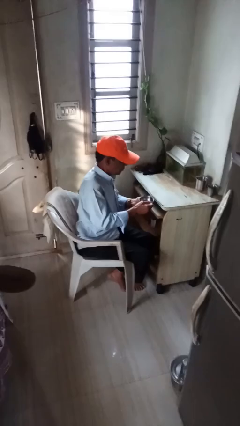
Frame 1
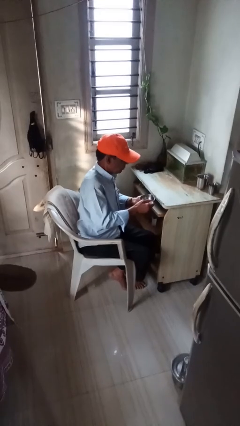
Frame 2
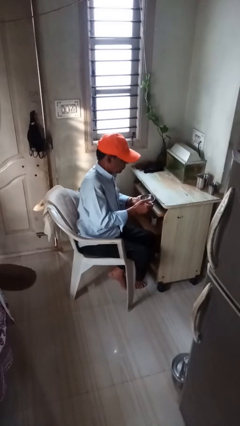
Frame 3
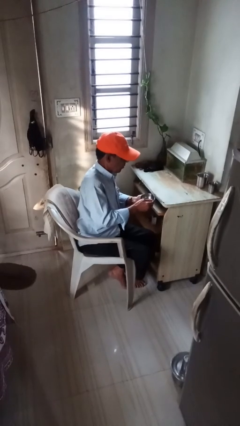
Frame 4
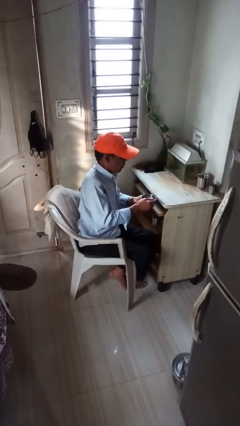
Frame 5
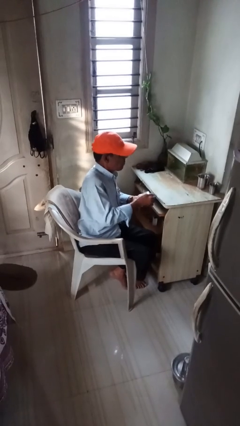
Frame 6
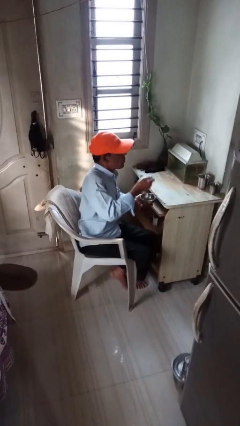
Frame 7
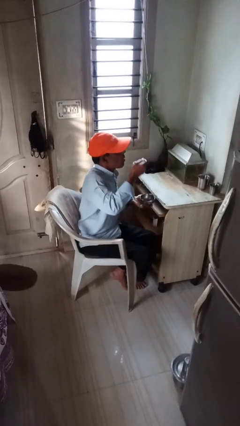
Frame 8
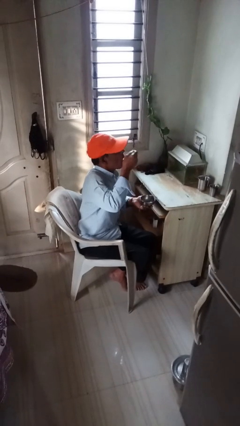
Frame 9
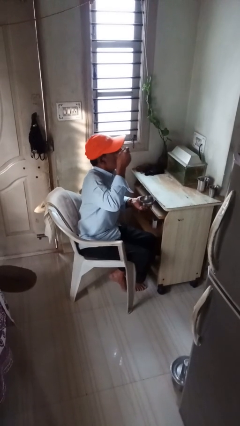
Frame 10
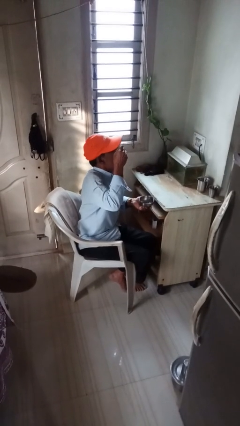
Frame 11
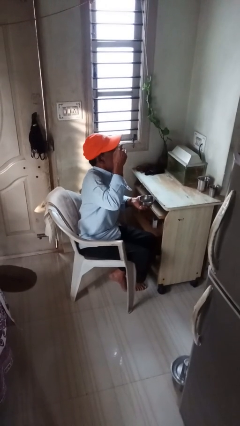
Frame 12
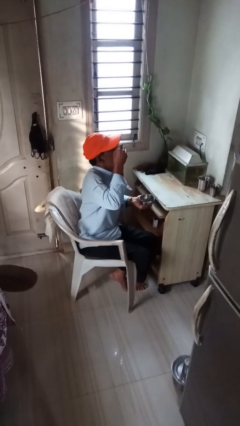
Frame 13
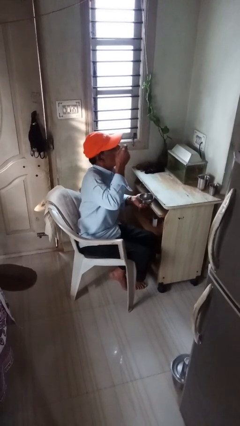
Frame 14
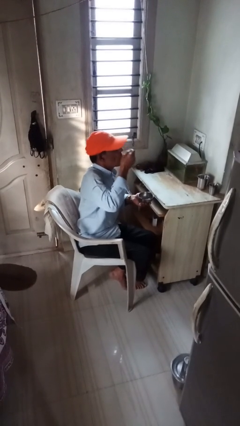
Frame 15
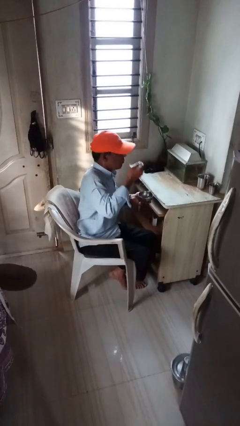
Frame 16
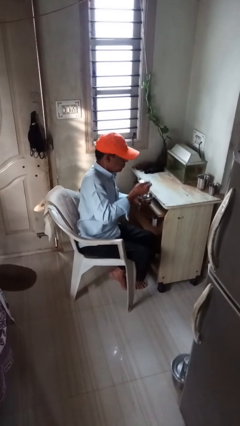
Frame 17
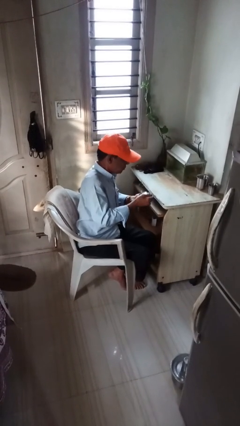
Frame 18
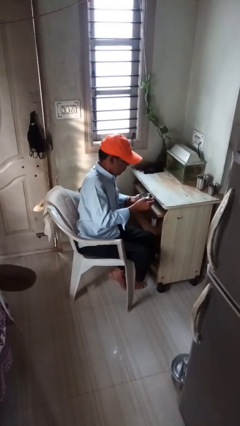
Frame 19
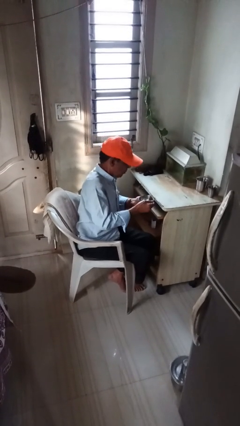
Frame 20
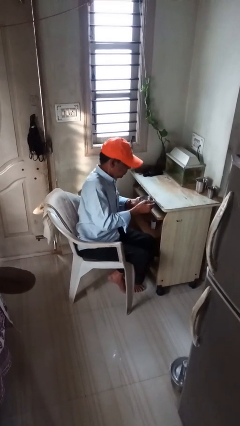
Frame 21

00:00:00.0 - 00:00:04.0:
person eats with utensil

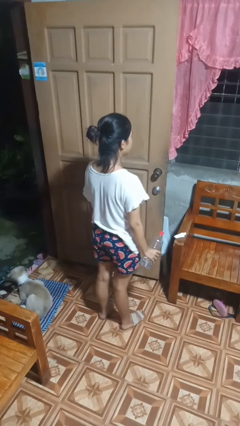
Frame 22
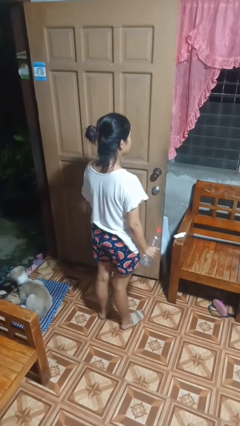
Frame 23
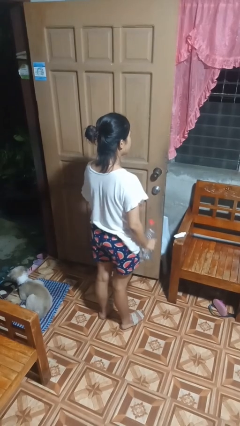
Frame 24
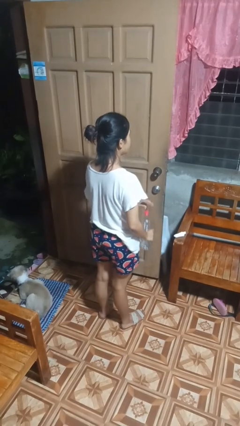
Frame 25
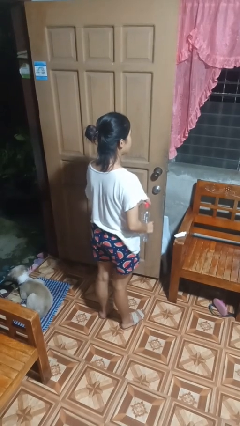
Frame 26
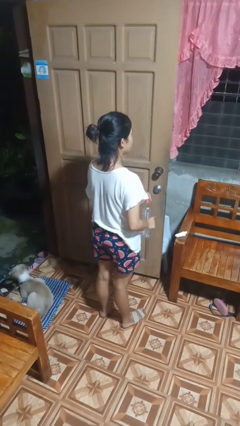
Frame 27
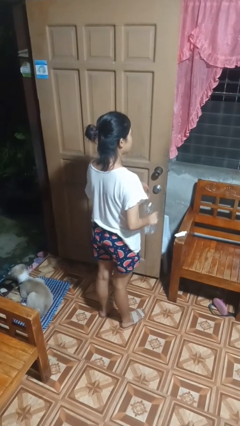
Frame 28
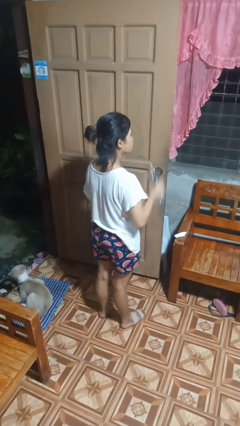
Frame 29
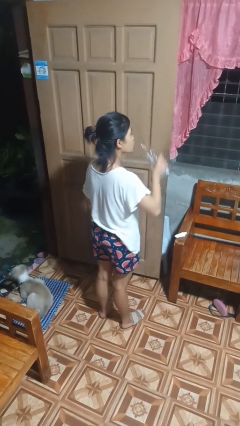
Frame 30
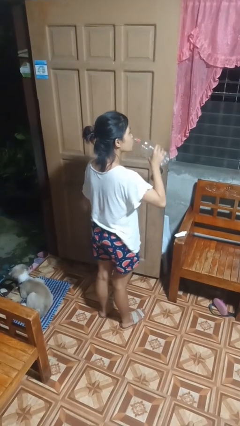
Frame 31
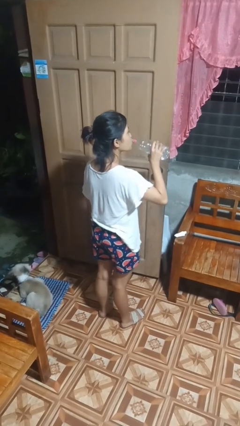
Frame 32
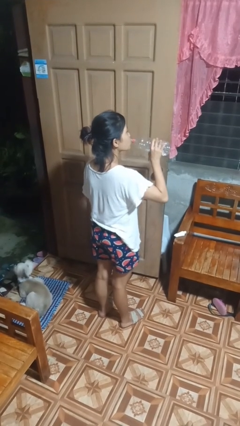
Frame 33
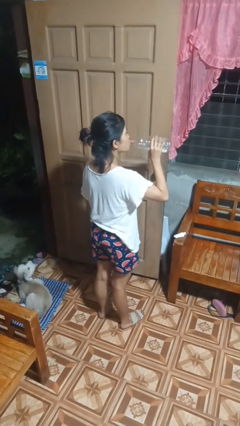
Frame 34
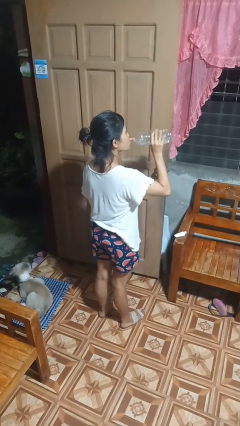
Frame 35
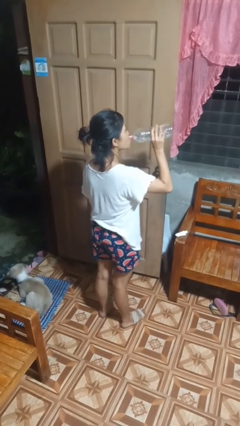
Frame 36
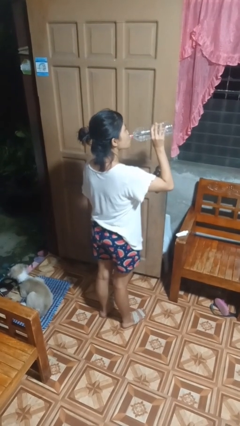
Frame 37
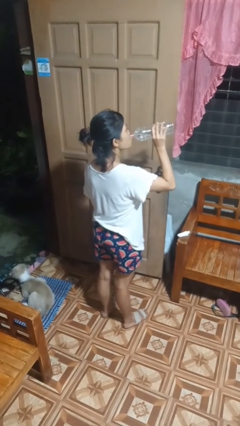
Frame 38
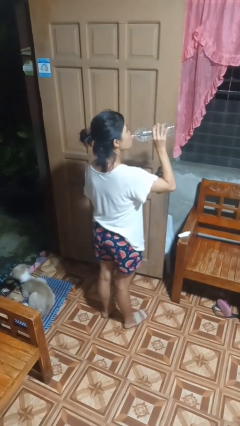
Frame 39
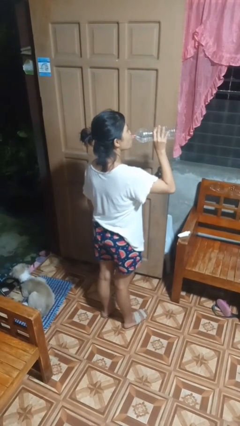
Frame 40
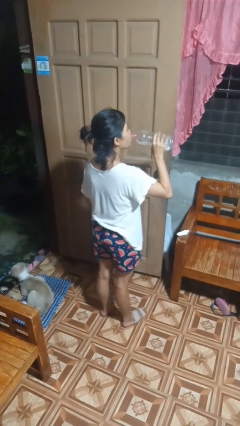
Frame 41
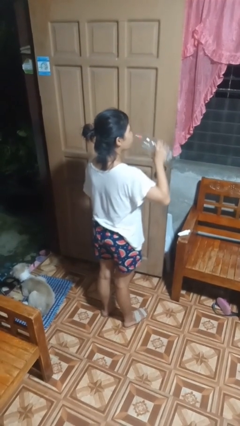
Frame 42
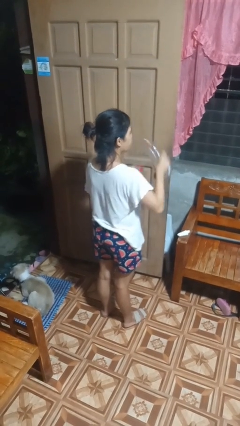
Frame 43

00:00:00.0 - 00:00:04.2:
person drinks from bottle

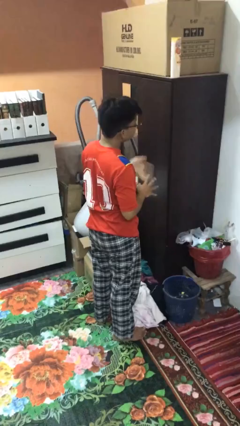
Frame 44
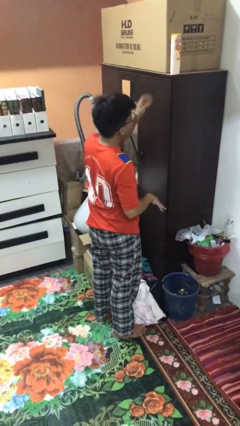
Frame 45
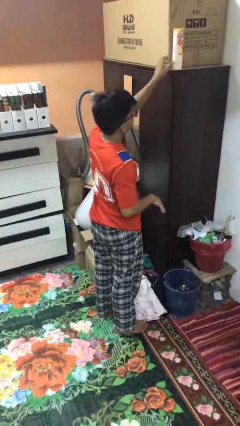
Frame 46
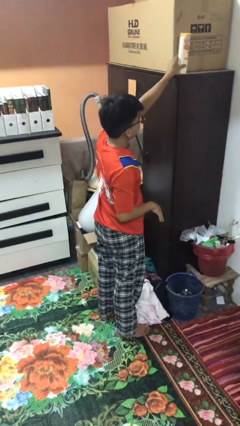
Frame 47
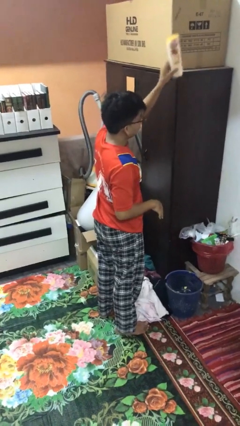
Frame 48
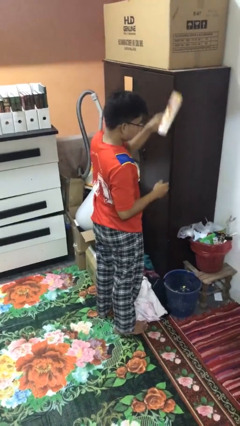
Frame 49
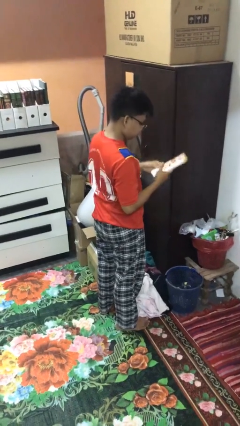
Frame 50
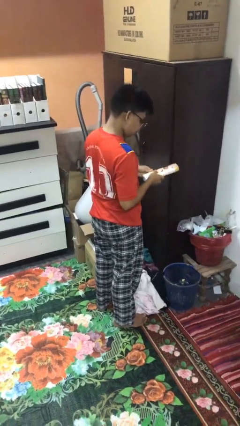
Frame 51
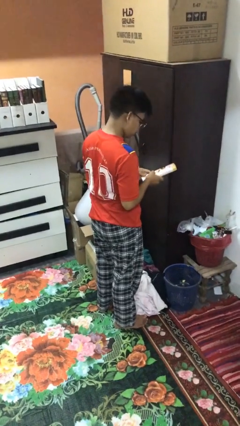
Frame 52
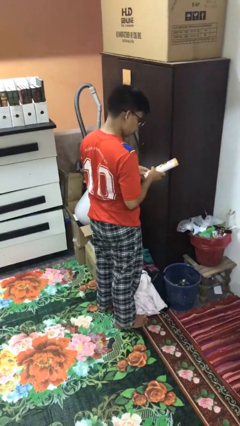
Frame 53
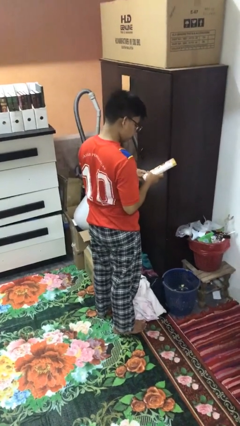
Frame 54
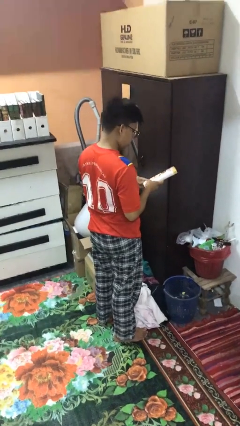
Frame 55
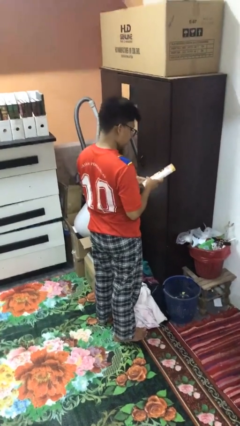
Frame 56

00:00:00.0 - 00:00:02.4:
person picks up object from shelf

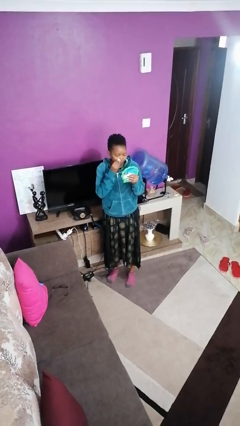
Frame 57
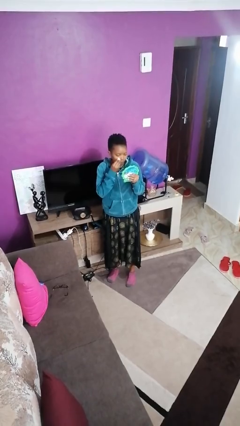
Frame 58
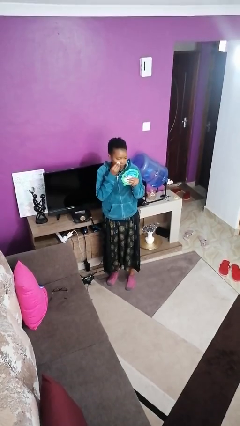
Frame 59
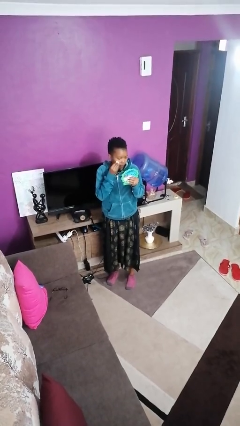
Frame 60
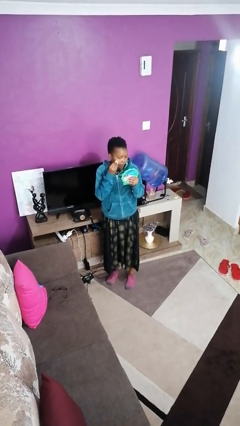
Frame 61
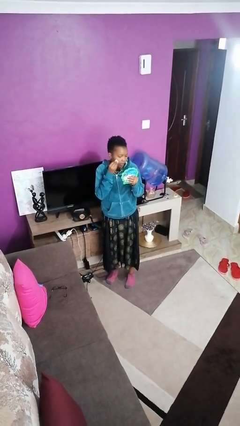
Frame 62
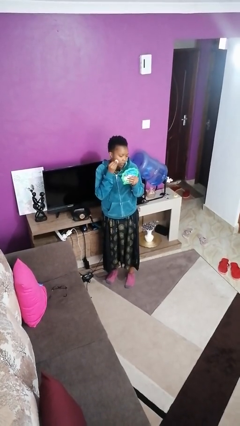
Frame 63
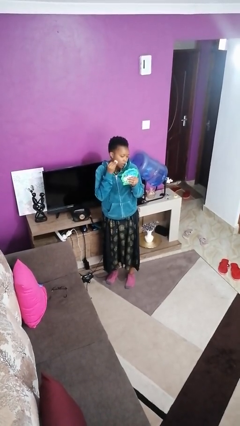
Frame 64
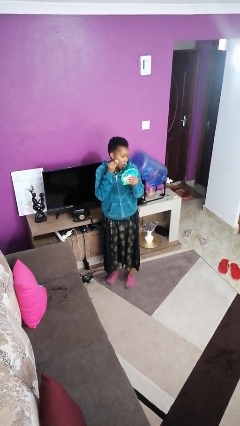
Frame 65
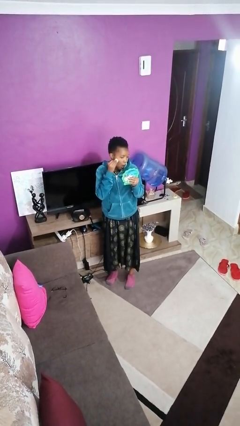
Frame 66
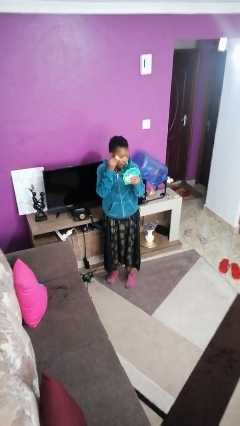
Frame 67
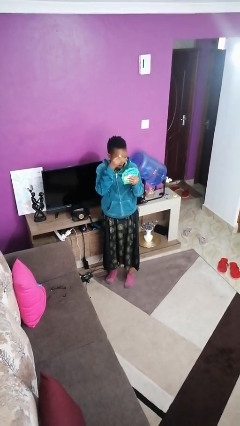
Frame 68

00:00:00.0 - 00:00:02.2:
person applies foundation makeup

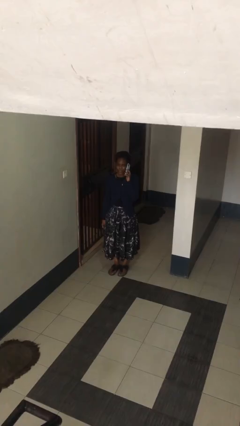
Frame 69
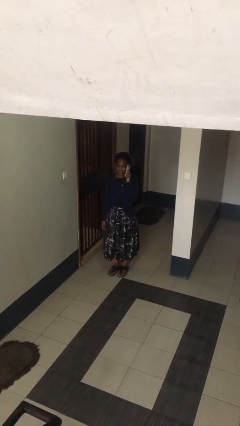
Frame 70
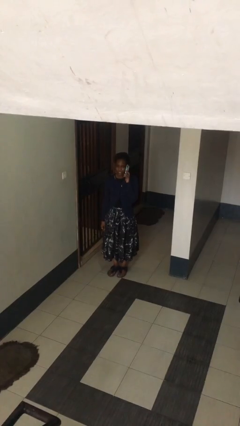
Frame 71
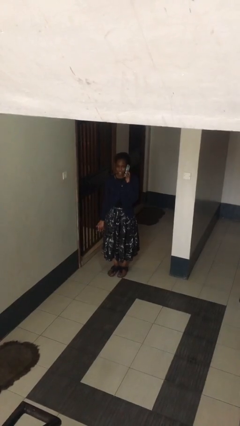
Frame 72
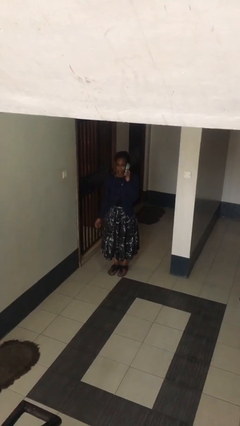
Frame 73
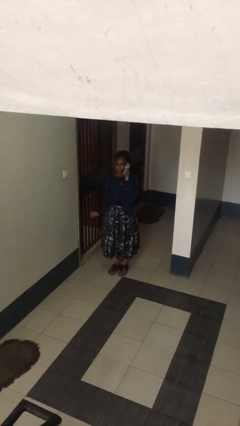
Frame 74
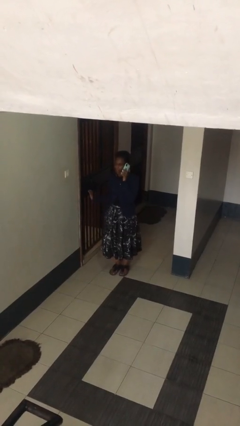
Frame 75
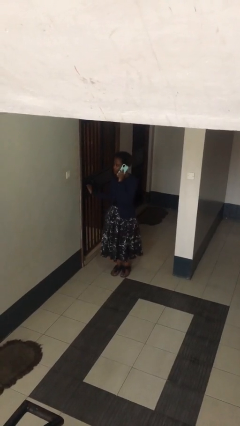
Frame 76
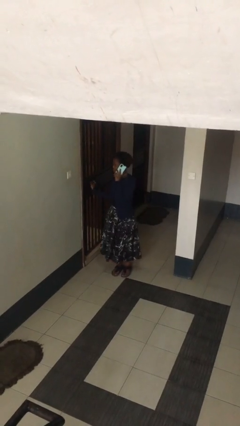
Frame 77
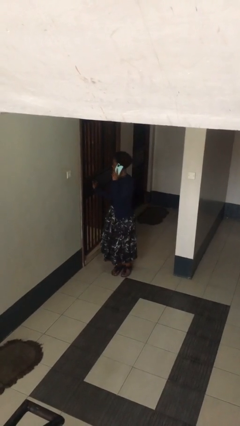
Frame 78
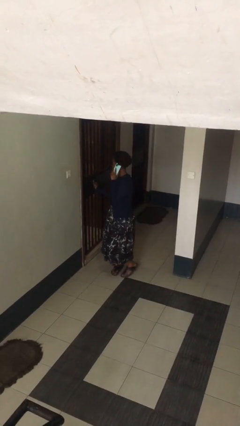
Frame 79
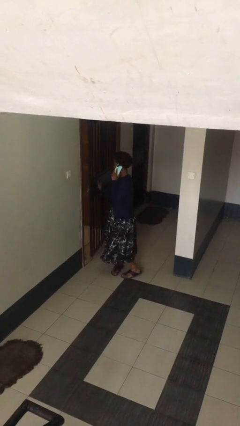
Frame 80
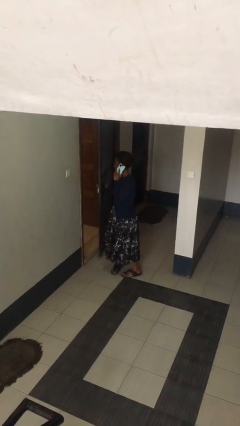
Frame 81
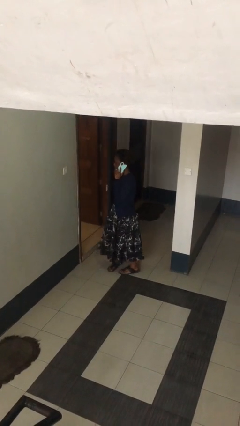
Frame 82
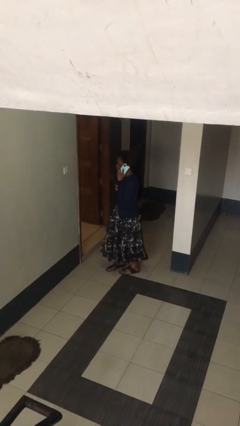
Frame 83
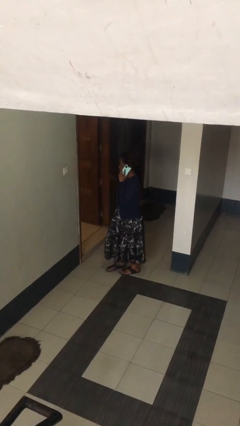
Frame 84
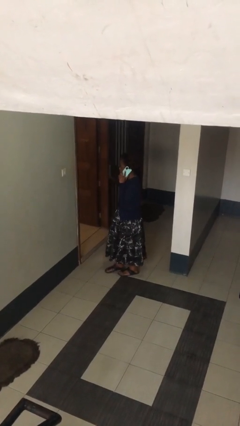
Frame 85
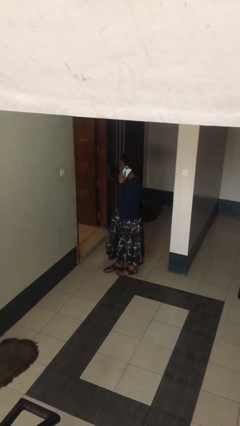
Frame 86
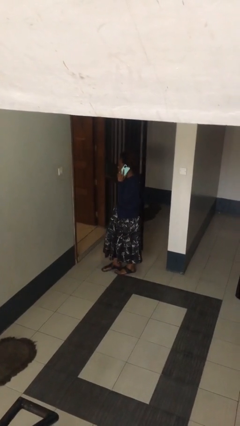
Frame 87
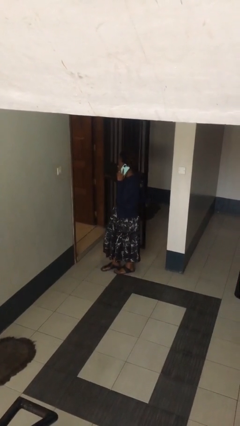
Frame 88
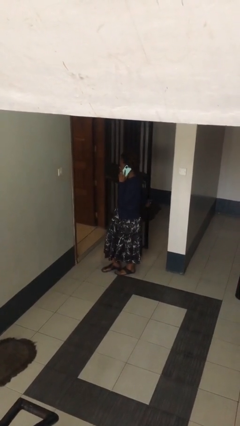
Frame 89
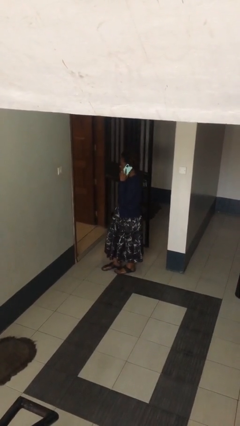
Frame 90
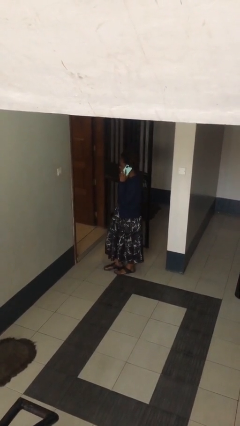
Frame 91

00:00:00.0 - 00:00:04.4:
person opens facility door

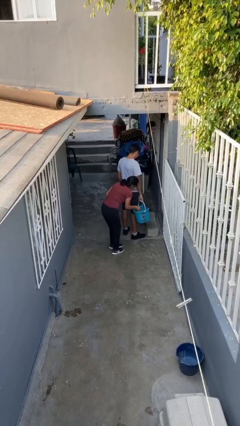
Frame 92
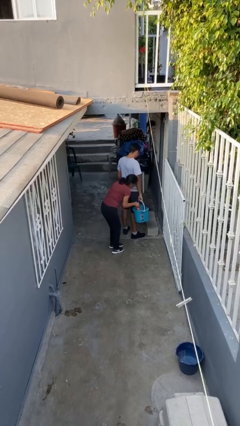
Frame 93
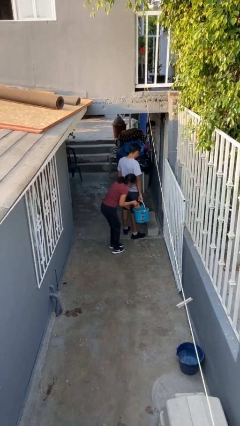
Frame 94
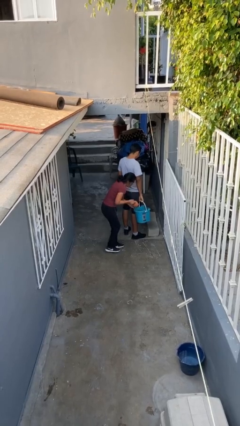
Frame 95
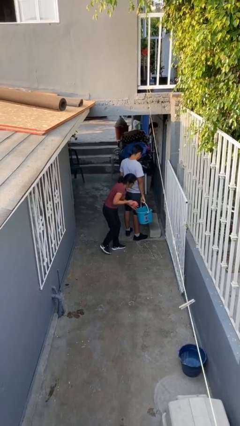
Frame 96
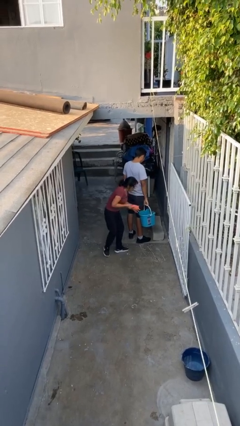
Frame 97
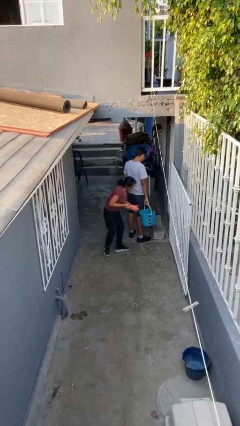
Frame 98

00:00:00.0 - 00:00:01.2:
person steals object from person
